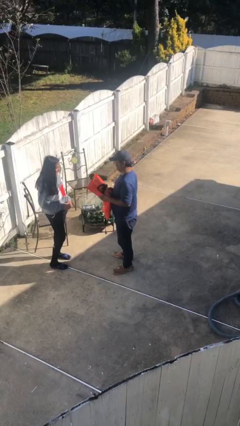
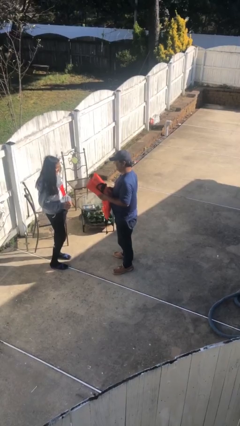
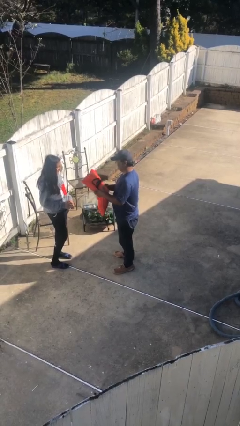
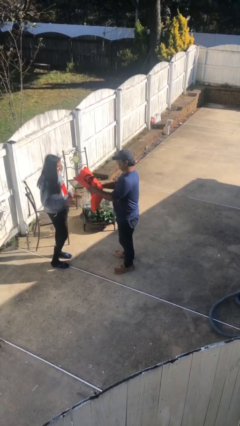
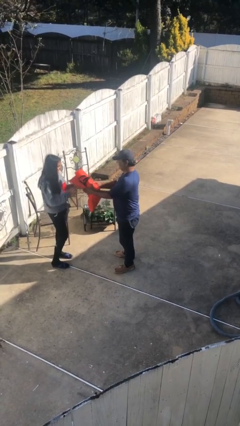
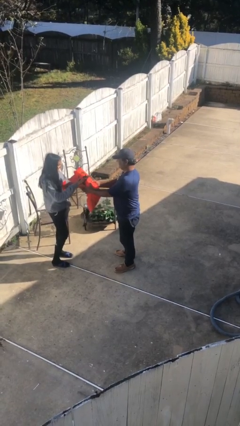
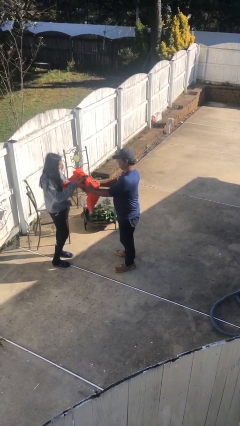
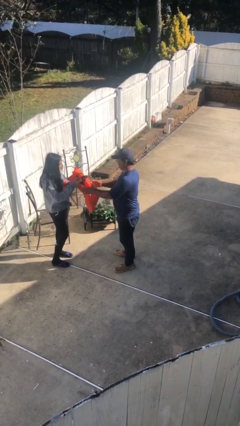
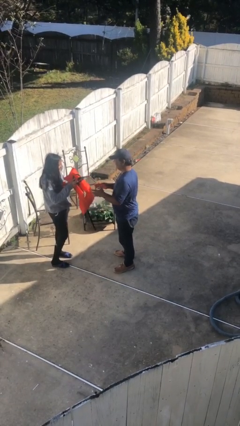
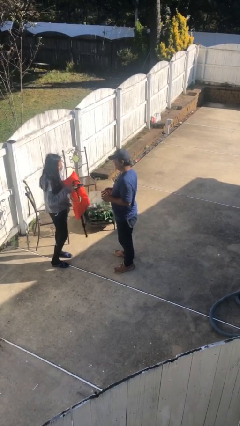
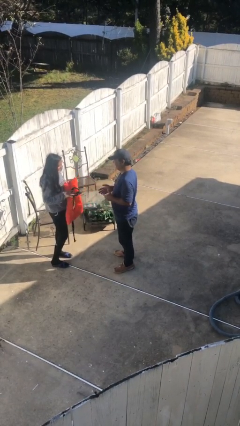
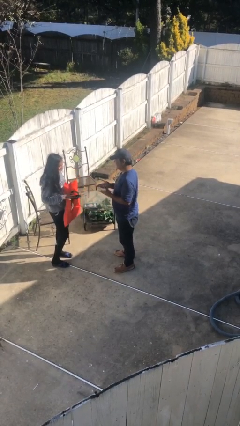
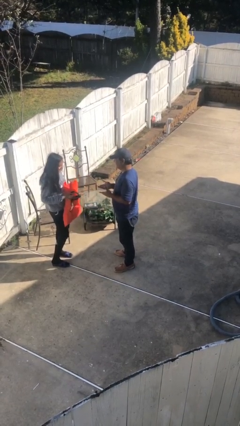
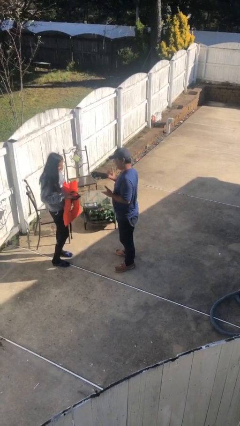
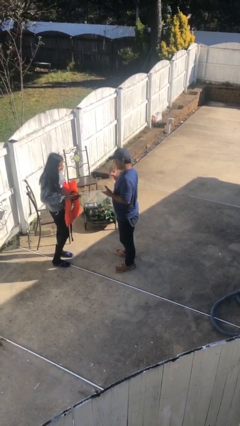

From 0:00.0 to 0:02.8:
person transfers object to person

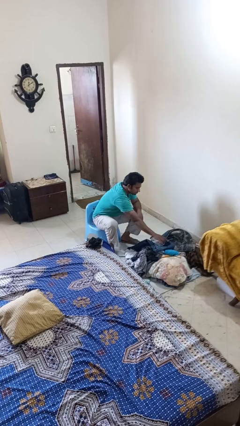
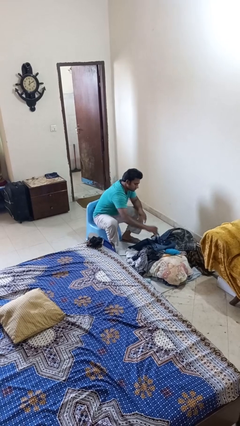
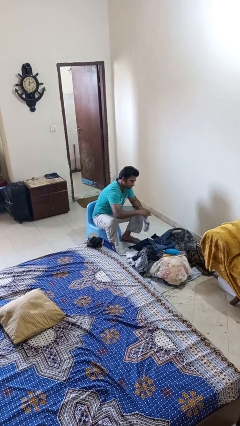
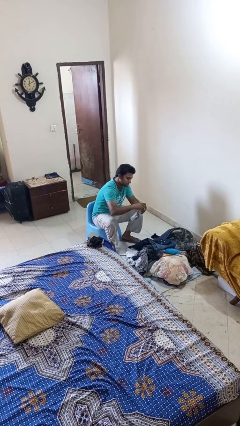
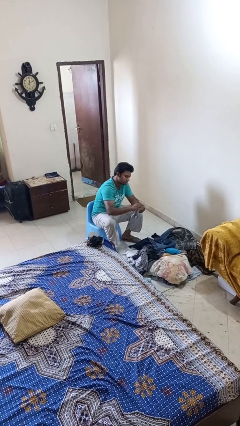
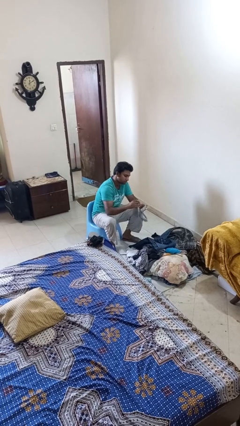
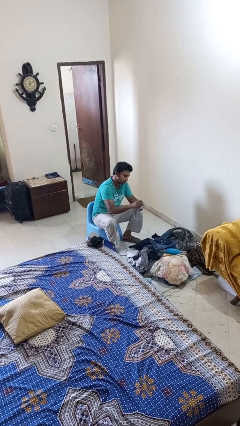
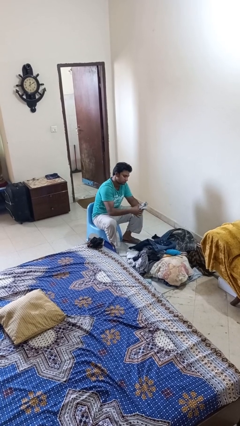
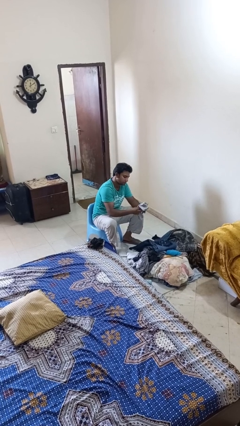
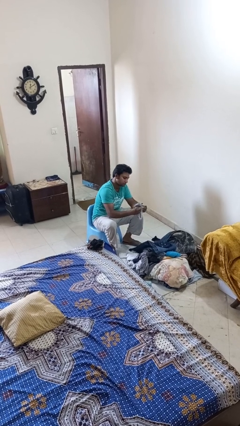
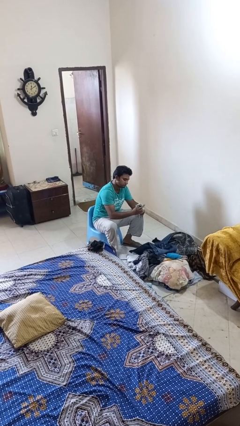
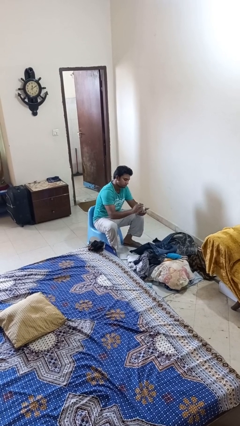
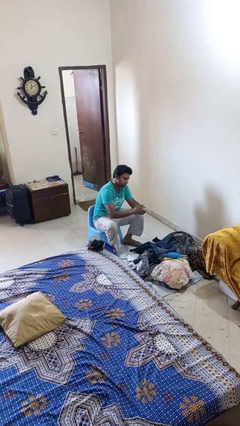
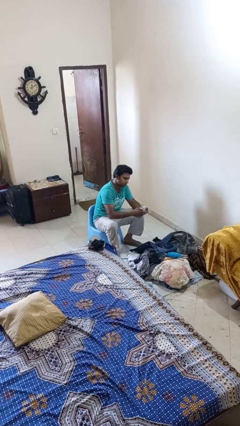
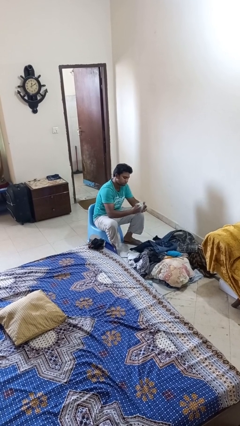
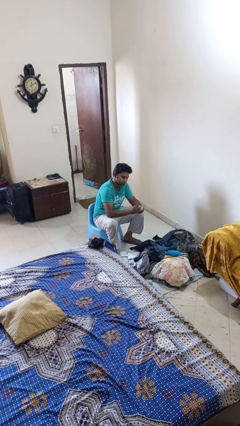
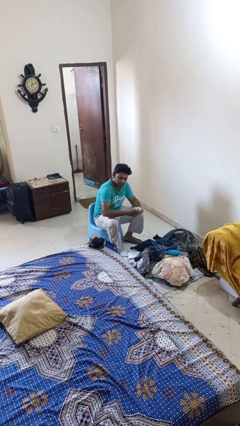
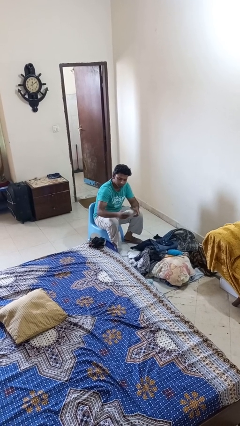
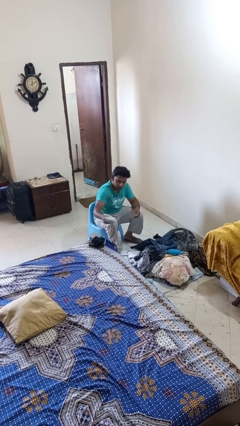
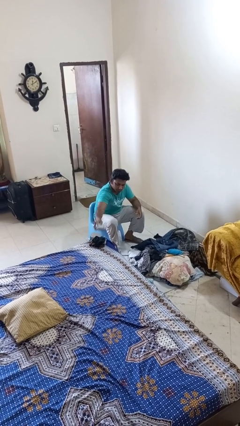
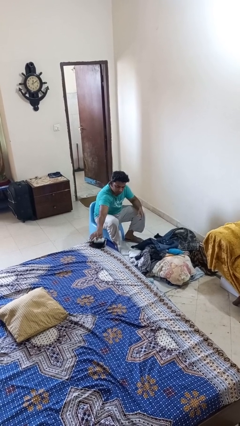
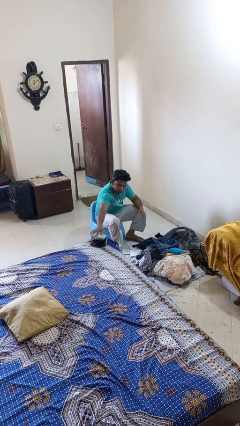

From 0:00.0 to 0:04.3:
person folds socks

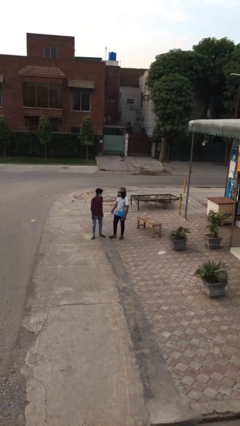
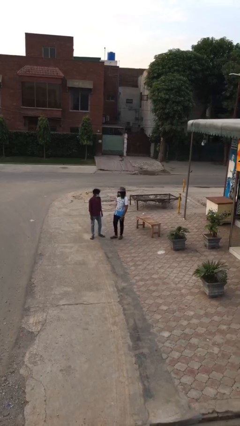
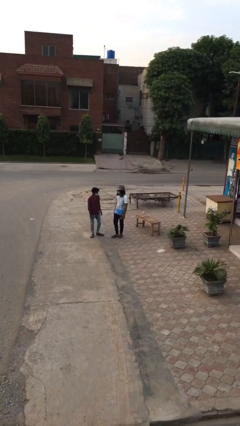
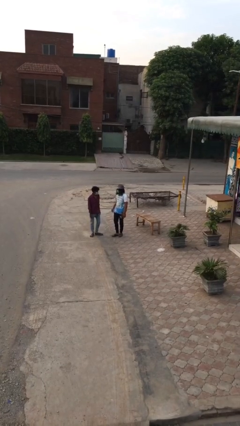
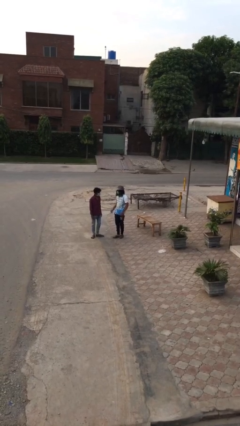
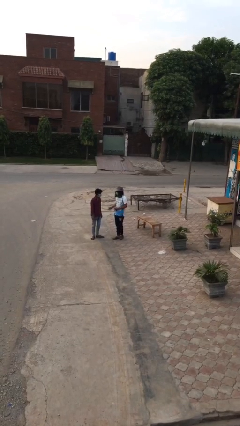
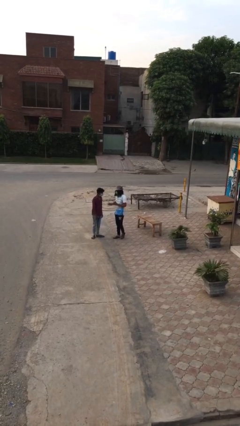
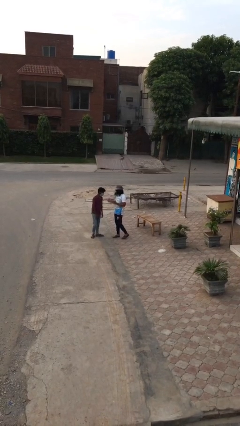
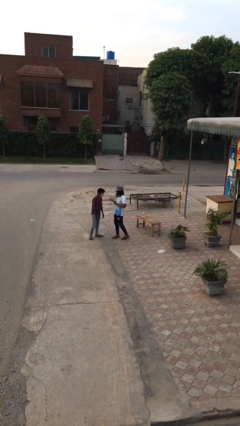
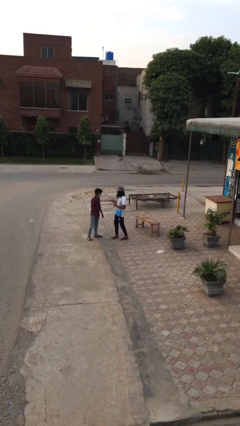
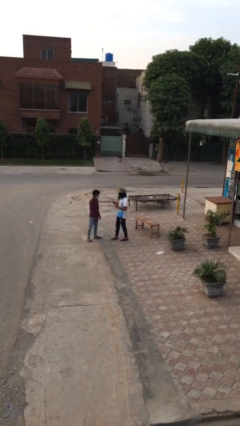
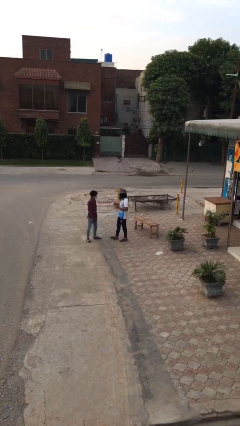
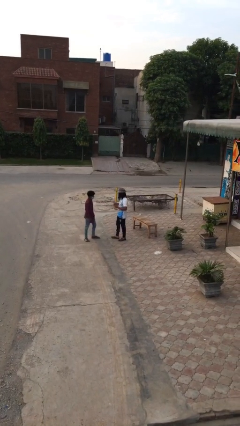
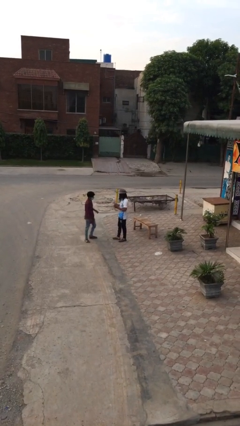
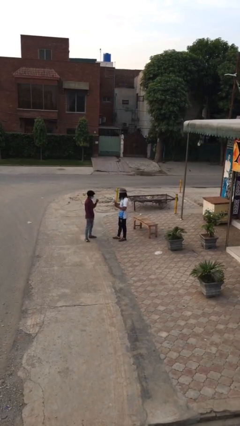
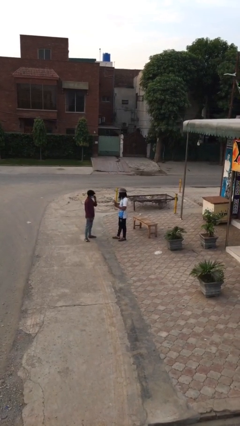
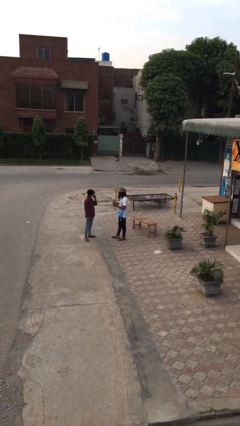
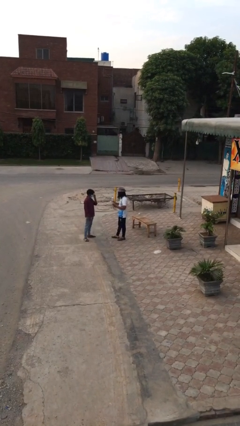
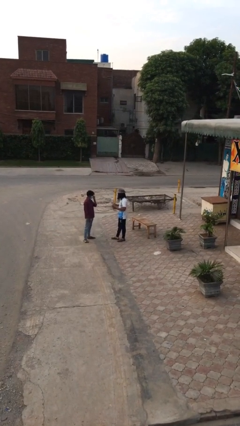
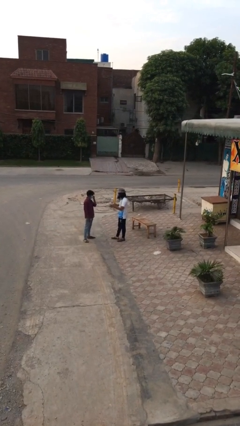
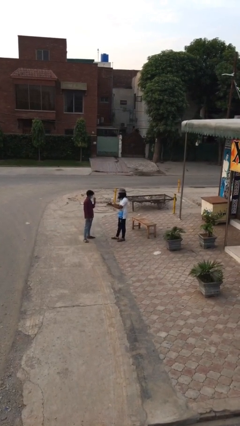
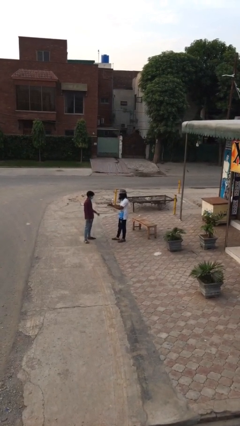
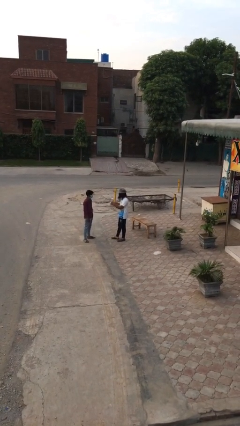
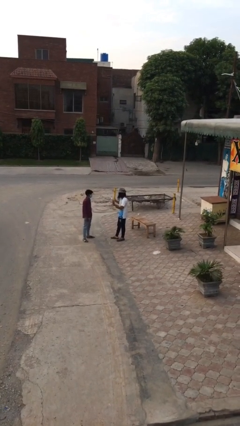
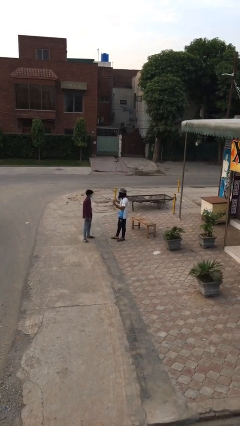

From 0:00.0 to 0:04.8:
person talks to person

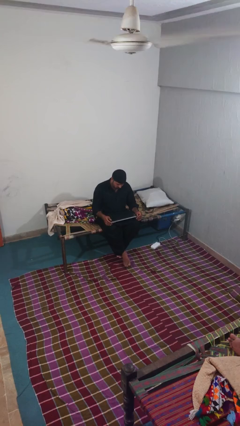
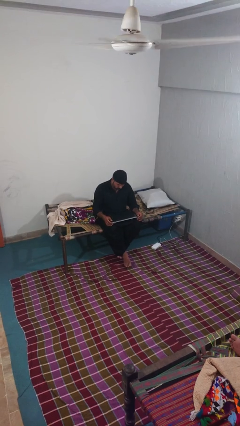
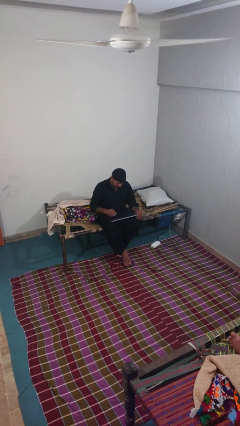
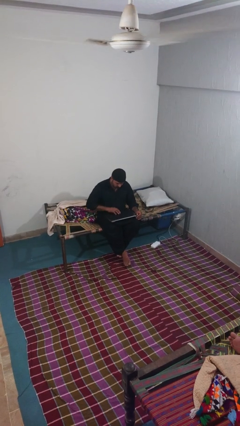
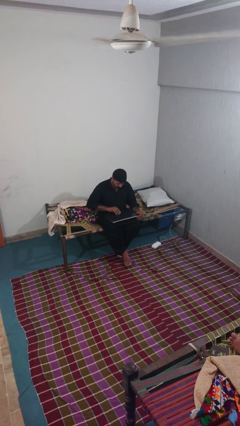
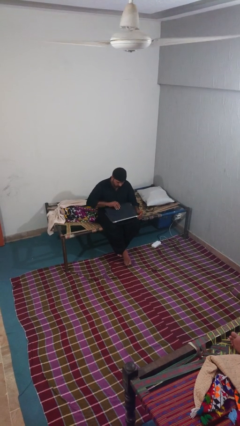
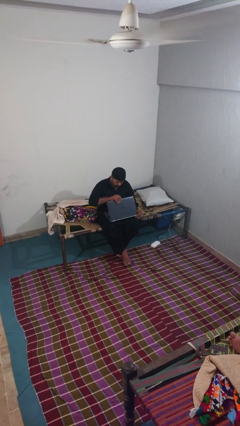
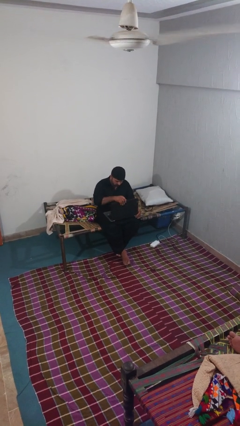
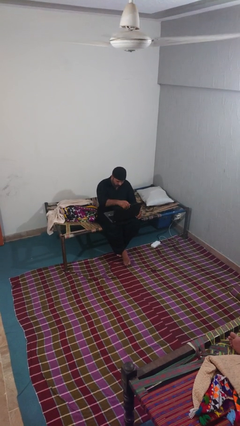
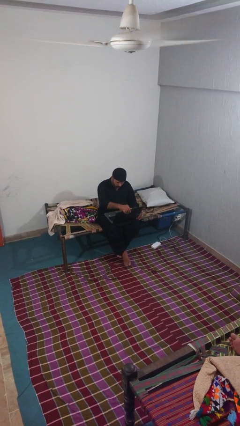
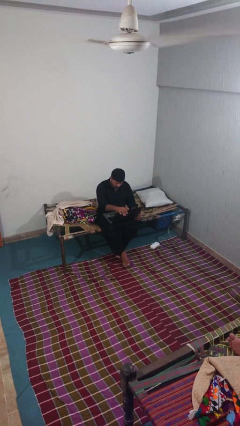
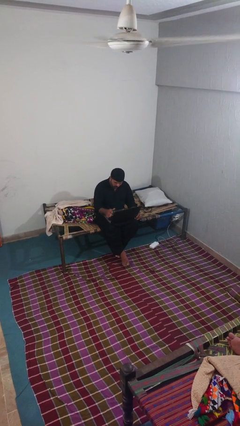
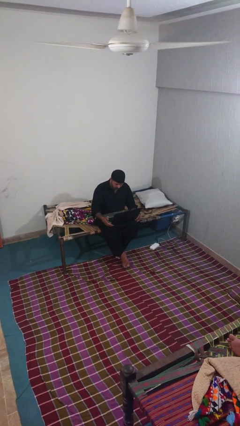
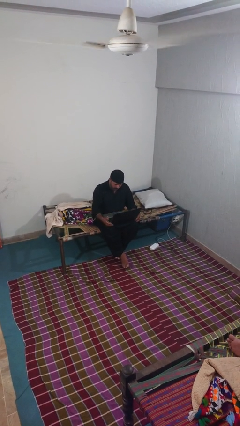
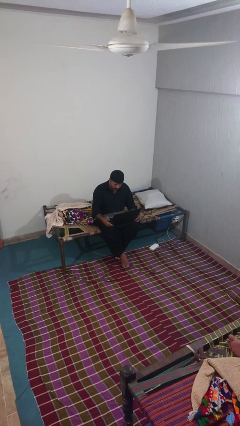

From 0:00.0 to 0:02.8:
person opens laptop

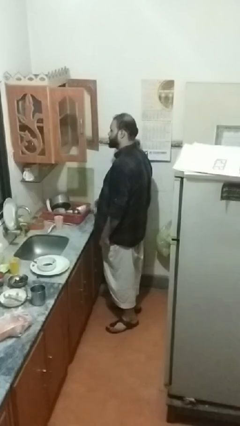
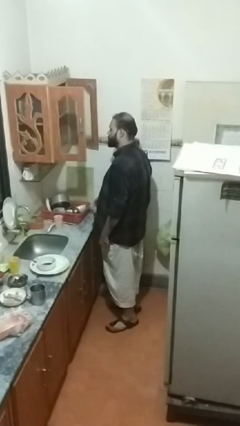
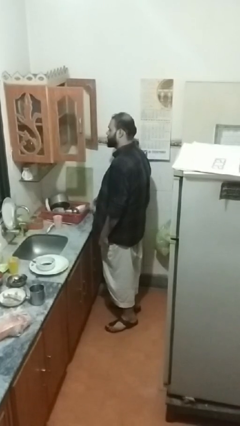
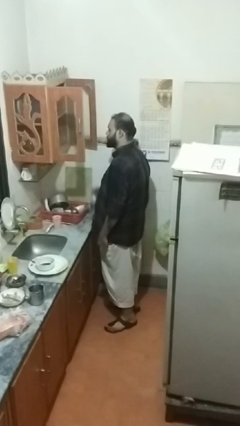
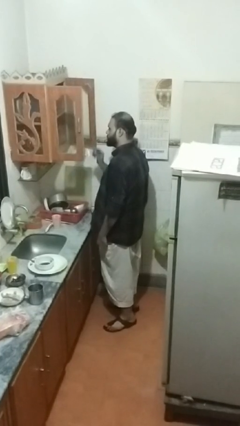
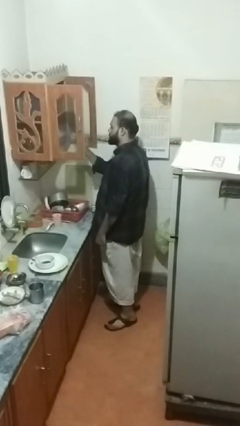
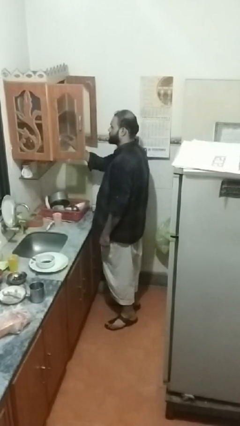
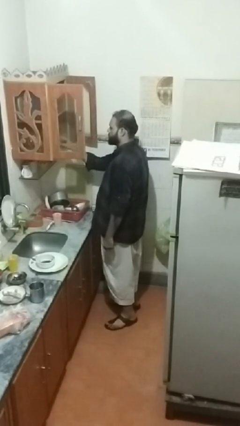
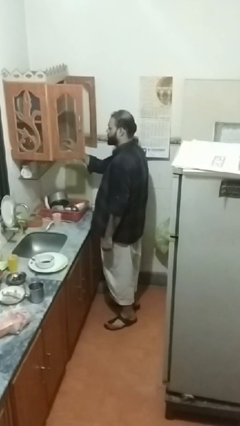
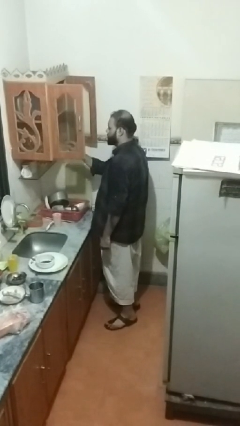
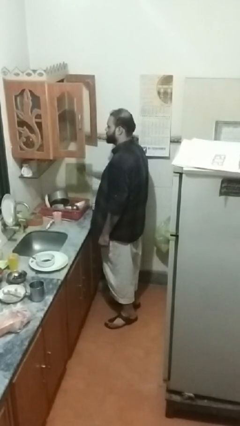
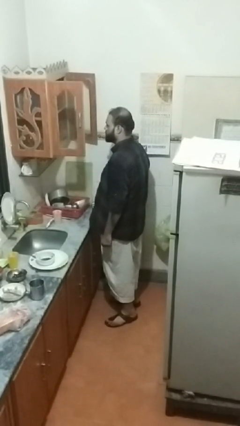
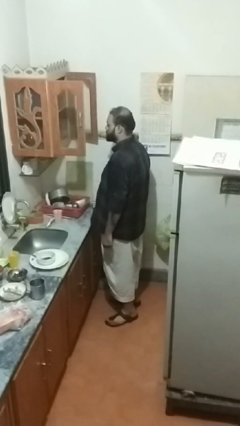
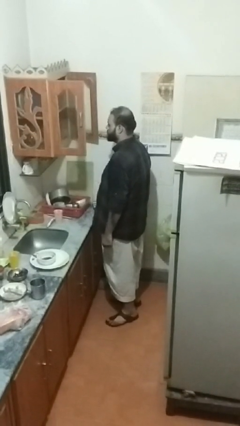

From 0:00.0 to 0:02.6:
person puts object in cabinet
